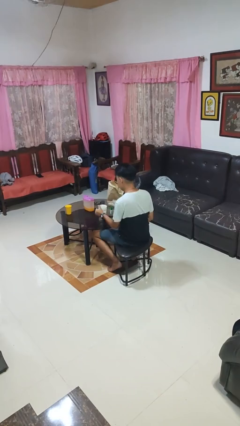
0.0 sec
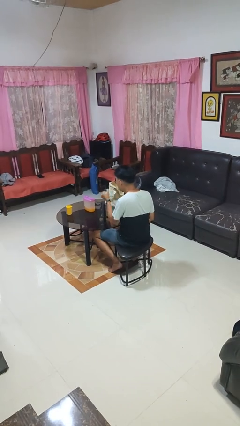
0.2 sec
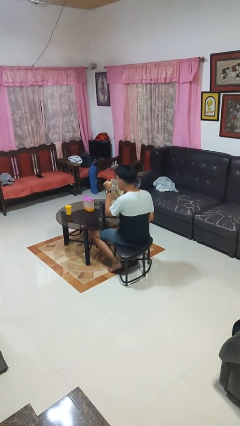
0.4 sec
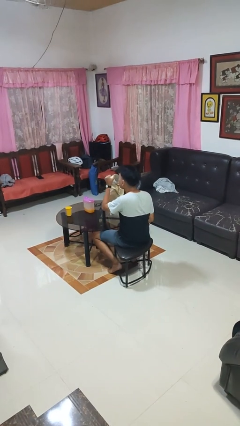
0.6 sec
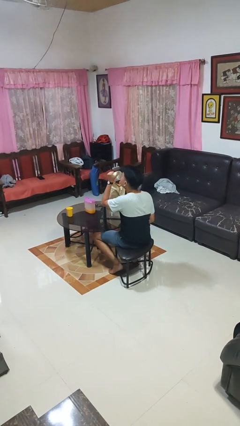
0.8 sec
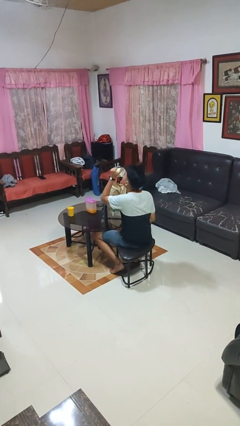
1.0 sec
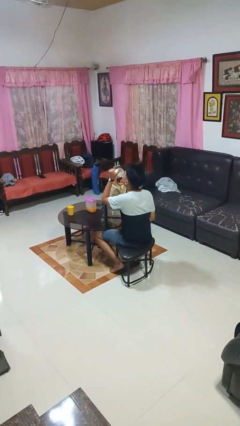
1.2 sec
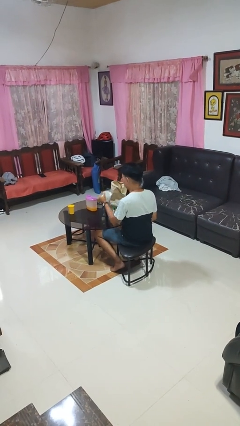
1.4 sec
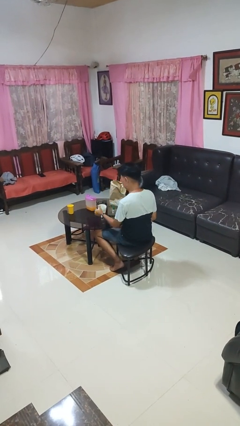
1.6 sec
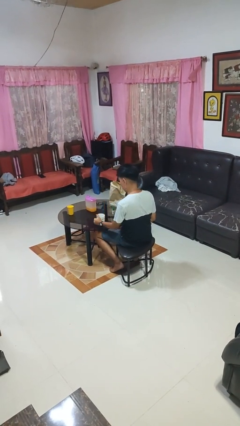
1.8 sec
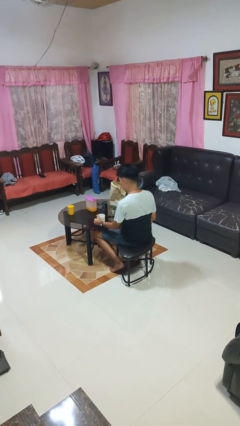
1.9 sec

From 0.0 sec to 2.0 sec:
person drinks from mug

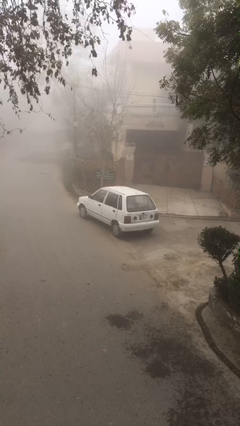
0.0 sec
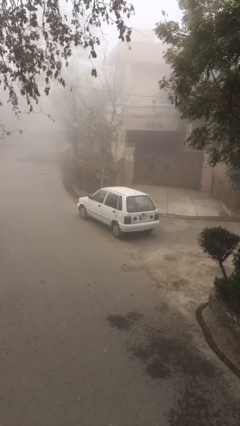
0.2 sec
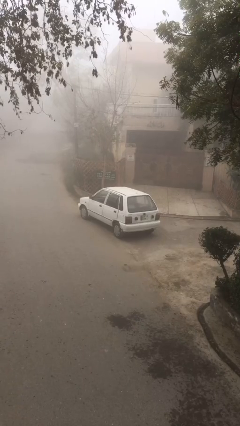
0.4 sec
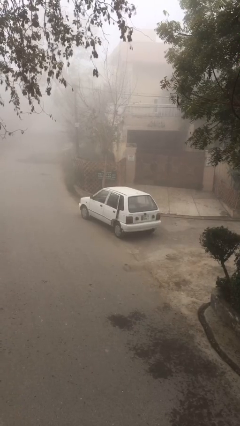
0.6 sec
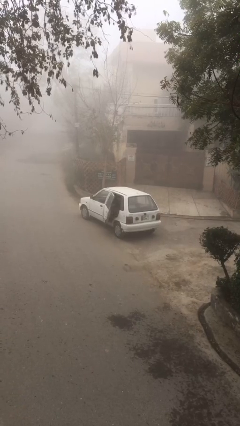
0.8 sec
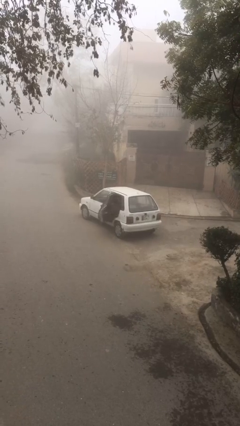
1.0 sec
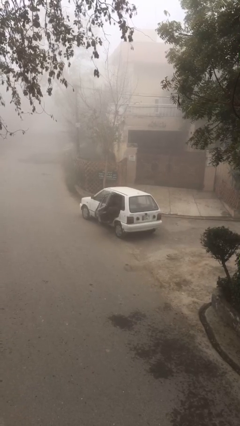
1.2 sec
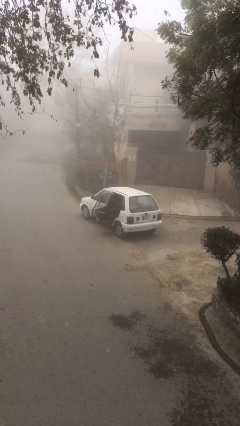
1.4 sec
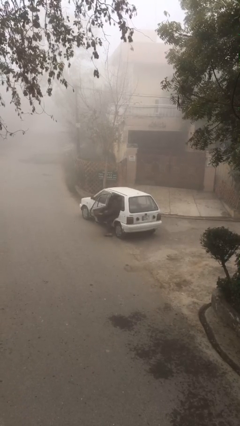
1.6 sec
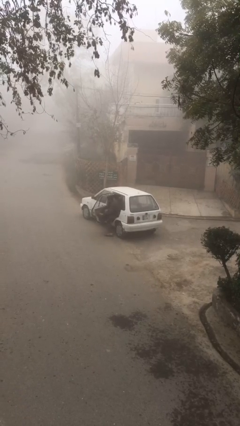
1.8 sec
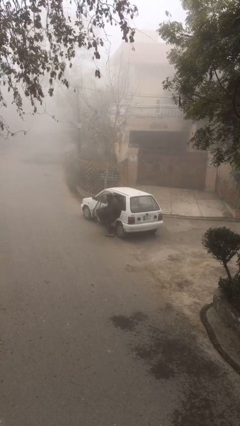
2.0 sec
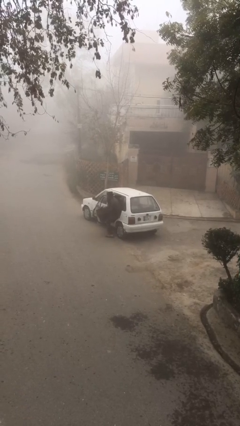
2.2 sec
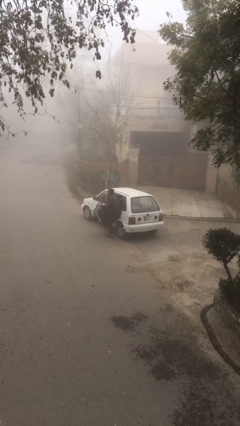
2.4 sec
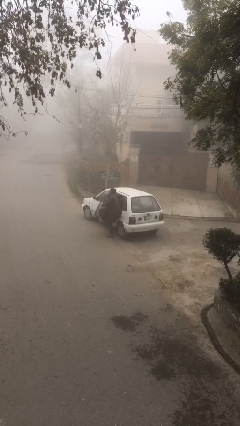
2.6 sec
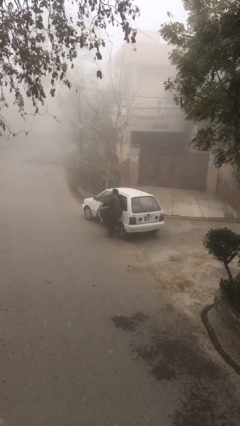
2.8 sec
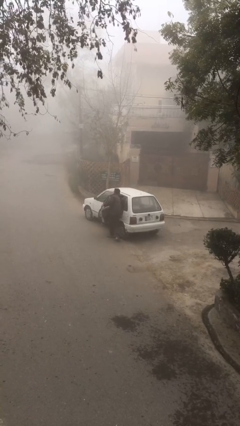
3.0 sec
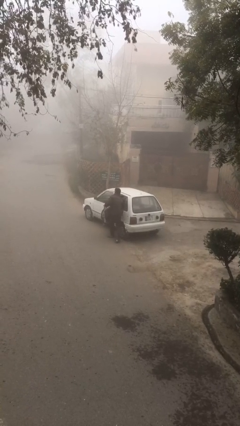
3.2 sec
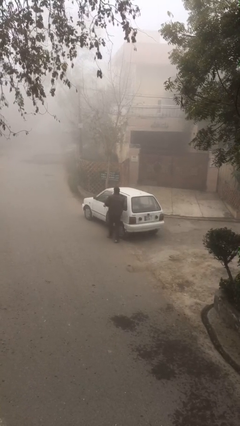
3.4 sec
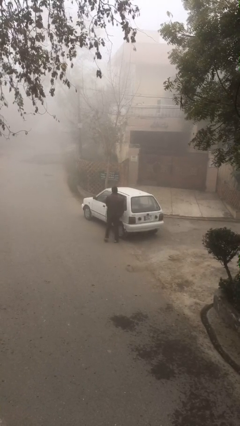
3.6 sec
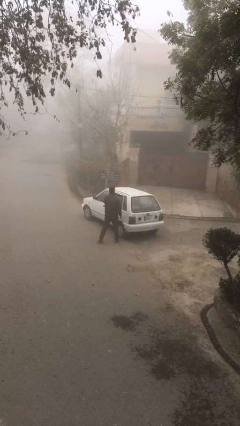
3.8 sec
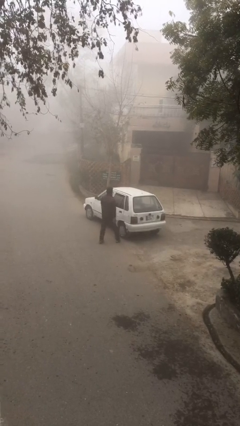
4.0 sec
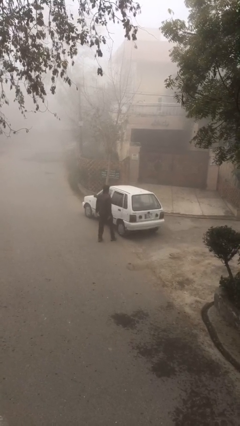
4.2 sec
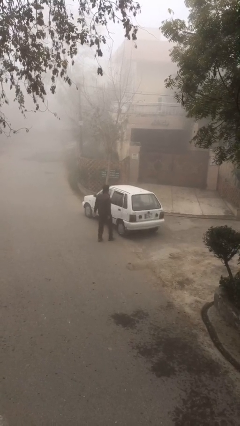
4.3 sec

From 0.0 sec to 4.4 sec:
car drops off person

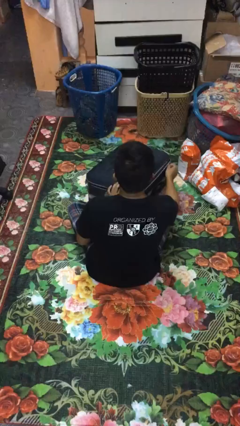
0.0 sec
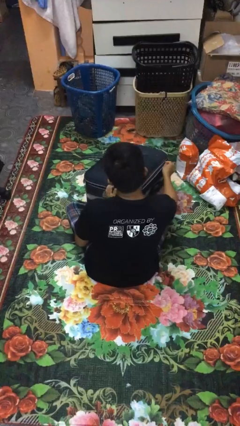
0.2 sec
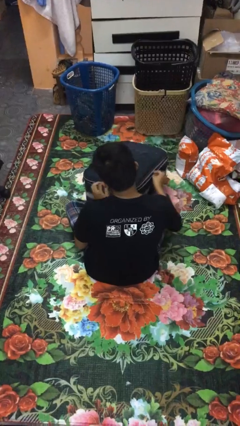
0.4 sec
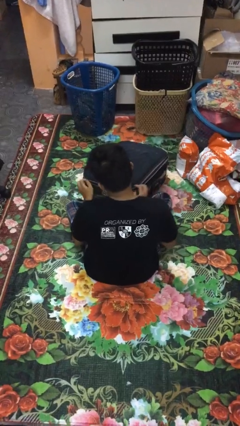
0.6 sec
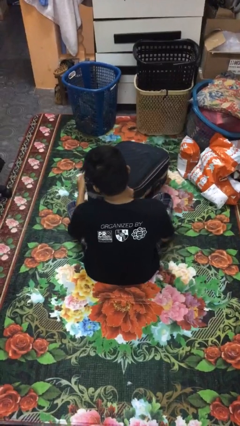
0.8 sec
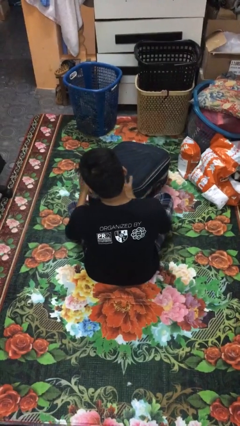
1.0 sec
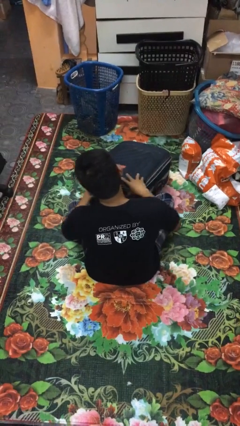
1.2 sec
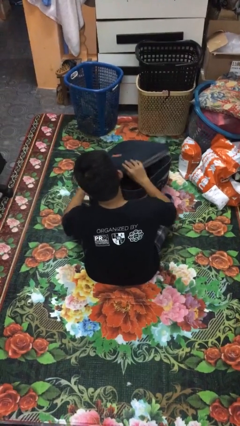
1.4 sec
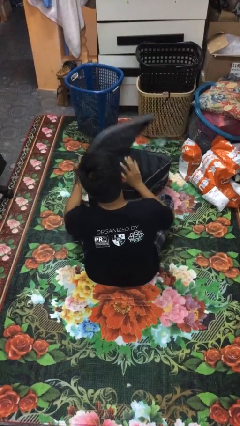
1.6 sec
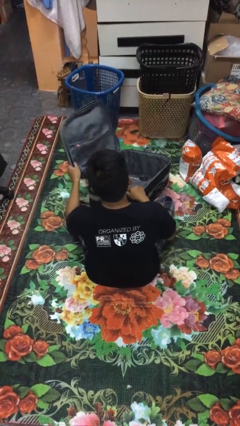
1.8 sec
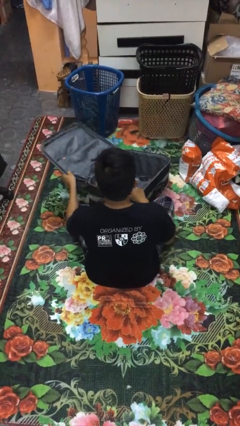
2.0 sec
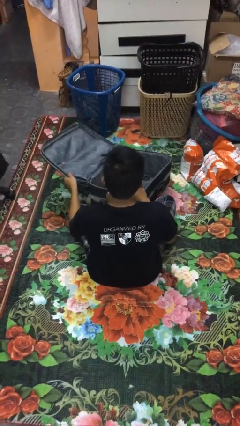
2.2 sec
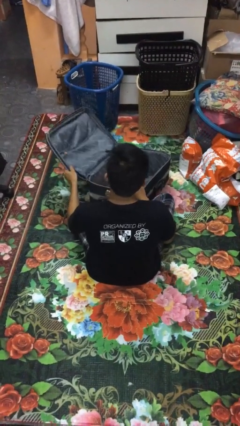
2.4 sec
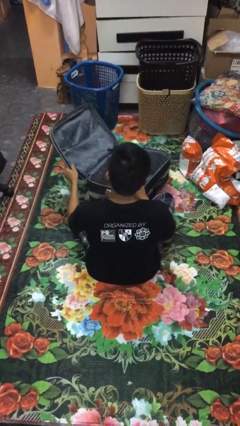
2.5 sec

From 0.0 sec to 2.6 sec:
person opens suitcase

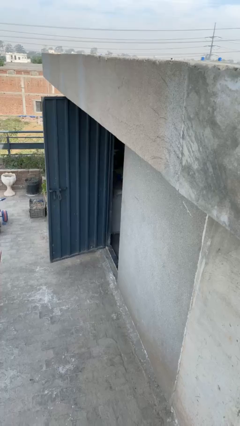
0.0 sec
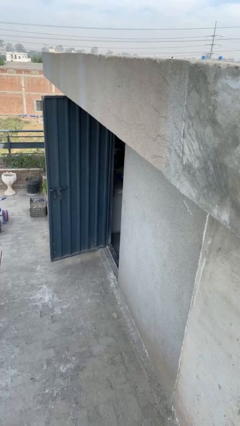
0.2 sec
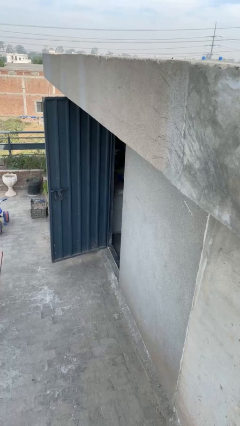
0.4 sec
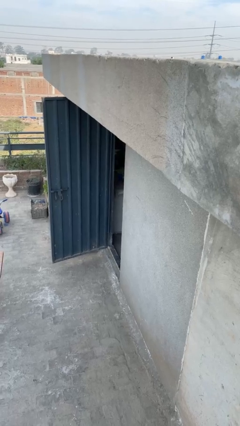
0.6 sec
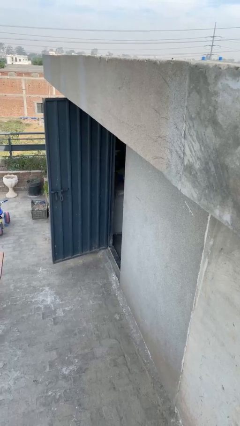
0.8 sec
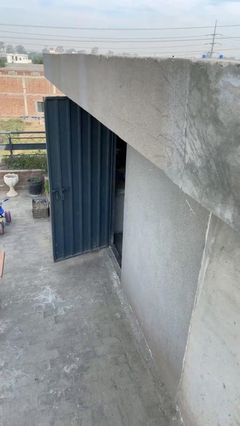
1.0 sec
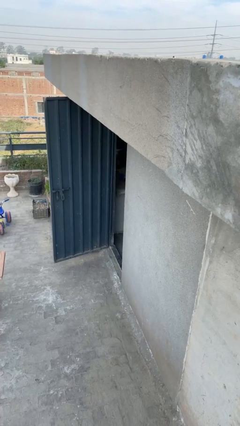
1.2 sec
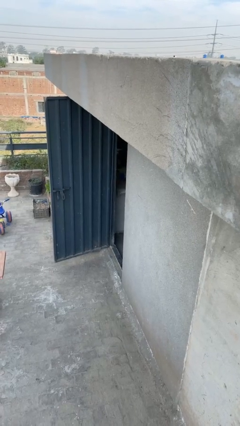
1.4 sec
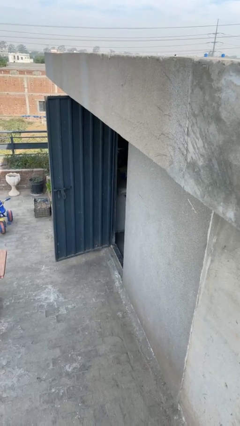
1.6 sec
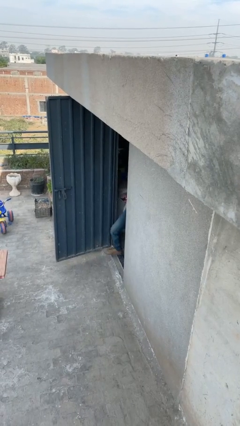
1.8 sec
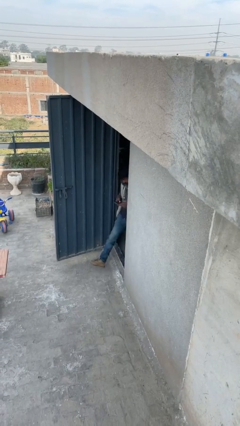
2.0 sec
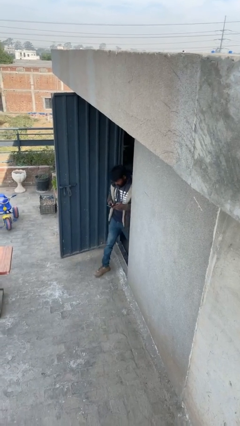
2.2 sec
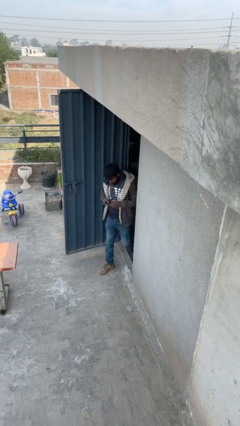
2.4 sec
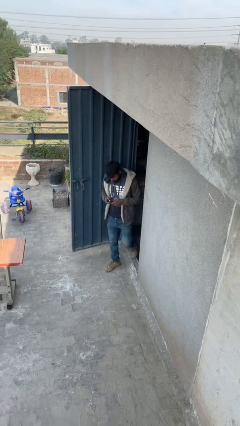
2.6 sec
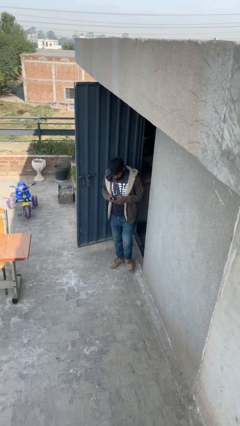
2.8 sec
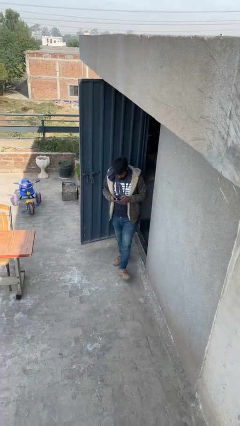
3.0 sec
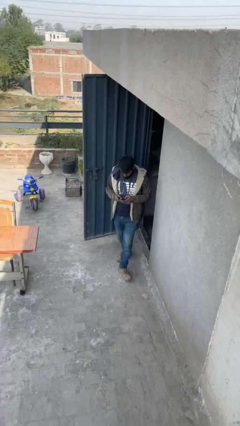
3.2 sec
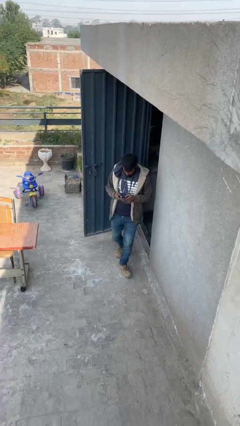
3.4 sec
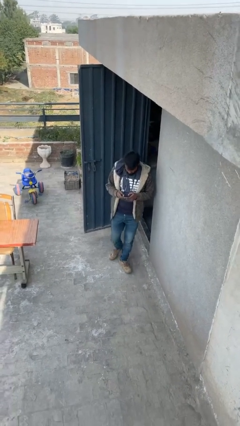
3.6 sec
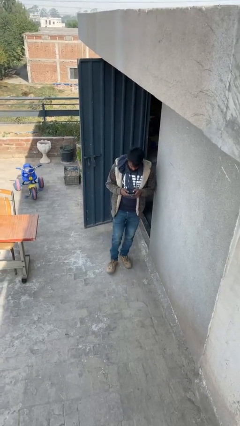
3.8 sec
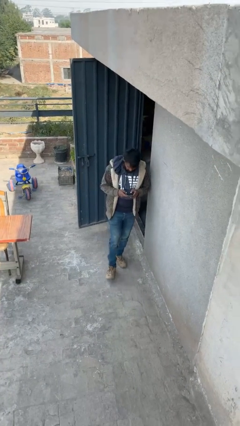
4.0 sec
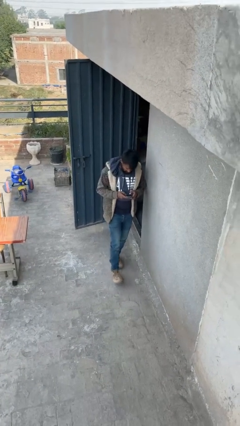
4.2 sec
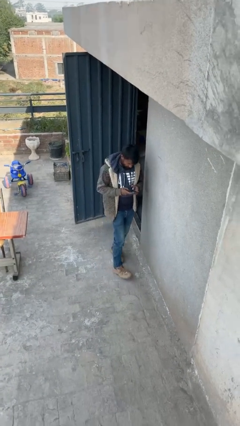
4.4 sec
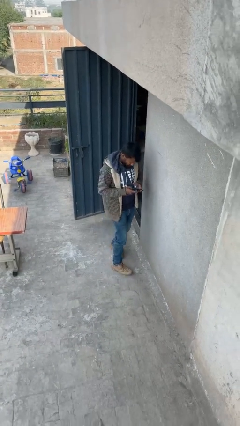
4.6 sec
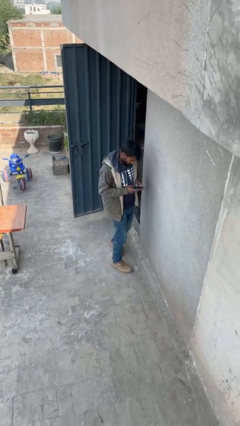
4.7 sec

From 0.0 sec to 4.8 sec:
person enters scene through structure

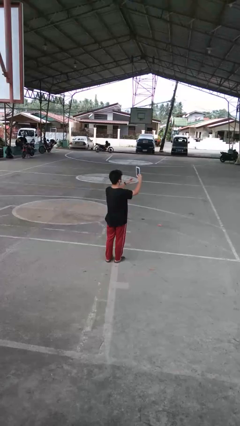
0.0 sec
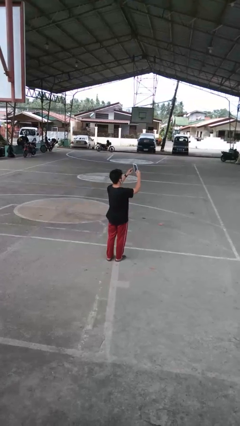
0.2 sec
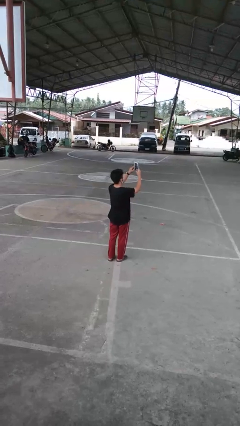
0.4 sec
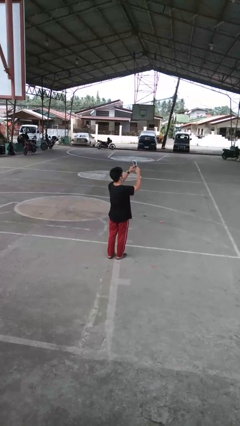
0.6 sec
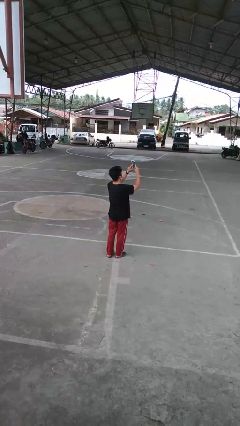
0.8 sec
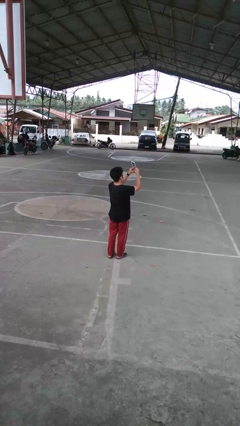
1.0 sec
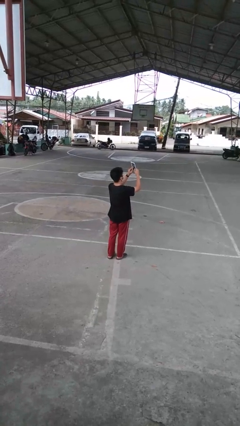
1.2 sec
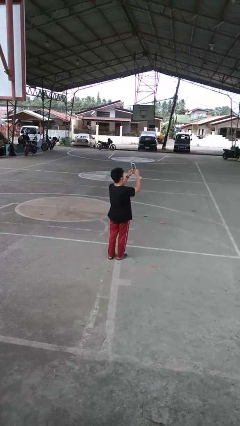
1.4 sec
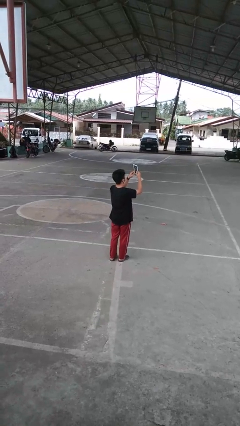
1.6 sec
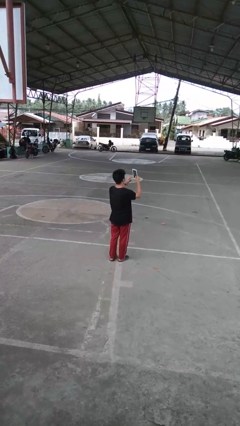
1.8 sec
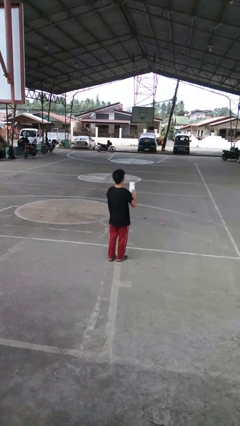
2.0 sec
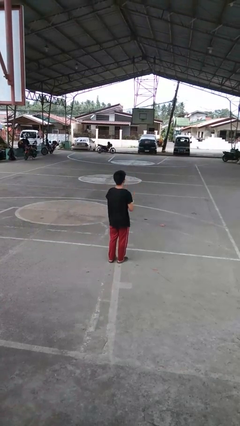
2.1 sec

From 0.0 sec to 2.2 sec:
person interacts with tablet

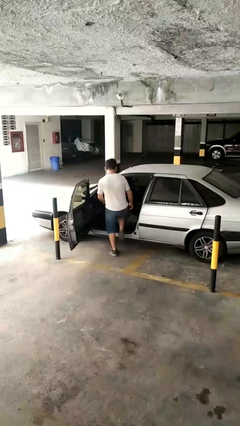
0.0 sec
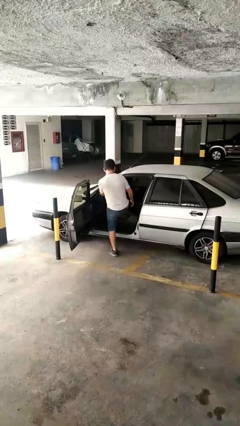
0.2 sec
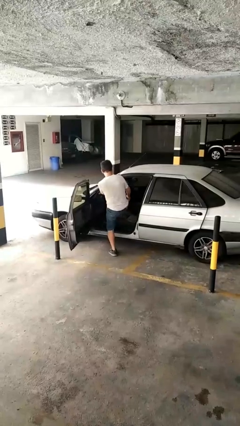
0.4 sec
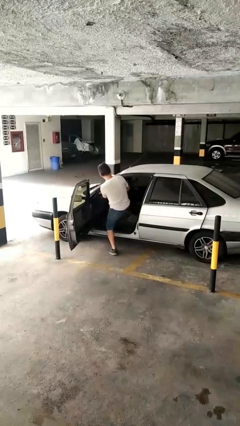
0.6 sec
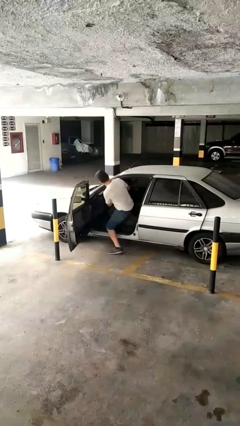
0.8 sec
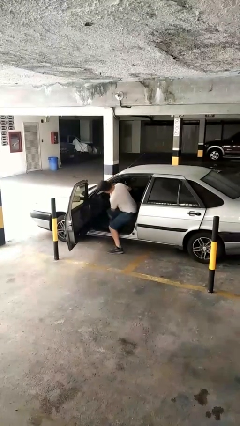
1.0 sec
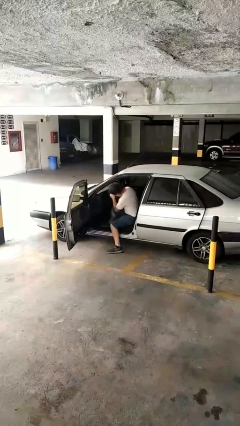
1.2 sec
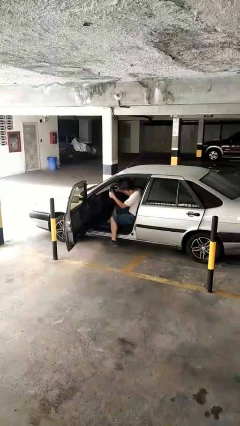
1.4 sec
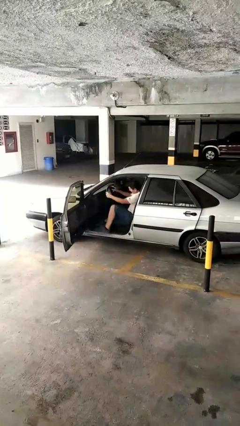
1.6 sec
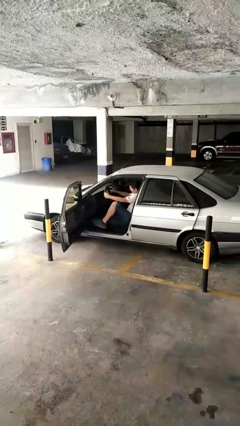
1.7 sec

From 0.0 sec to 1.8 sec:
person enters car
